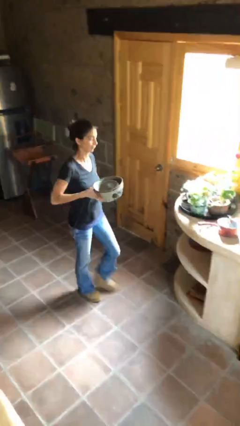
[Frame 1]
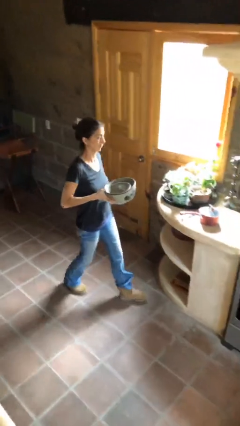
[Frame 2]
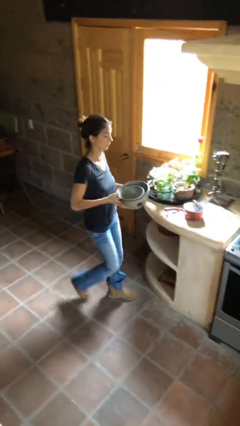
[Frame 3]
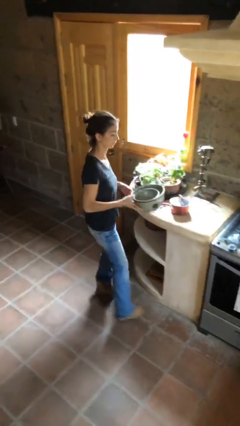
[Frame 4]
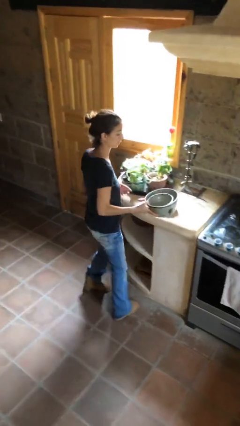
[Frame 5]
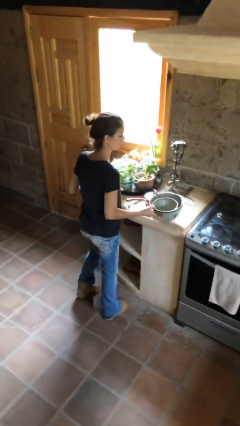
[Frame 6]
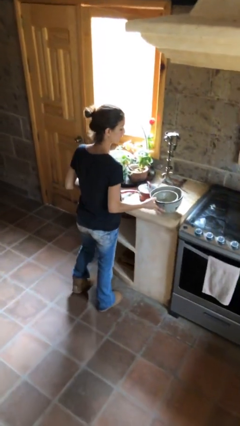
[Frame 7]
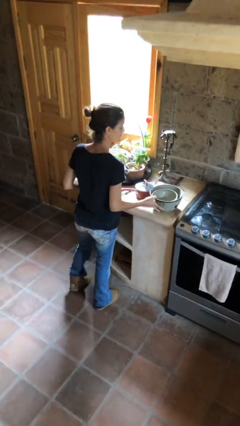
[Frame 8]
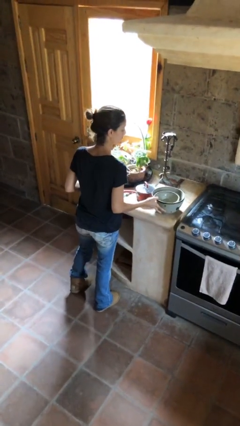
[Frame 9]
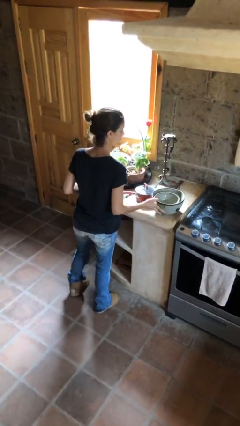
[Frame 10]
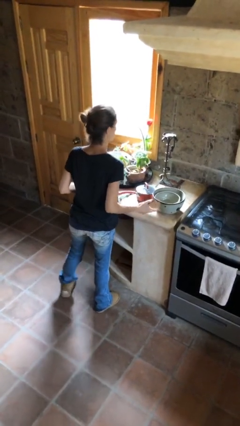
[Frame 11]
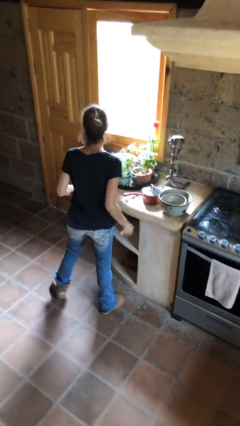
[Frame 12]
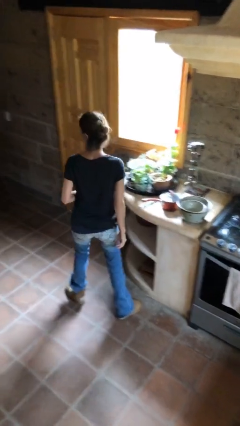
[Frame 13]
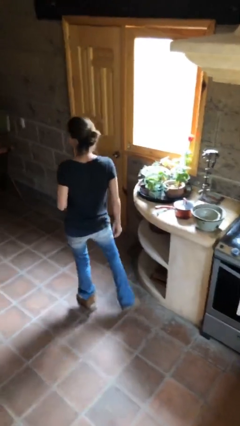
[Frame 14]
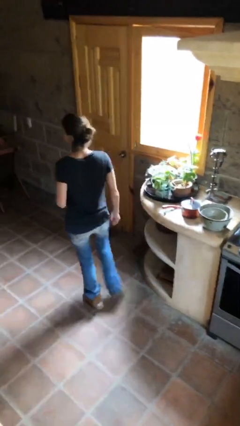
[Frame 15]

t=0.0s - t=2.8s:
person puts down object on table

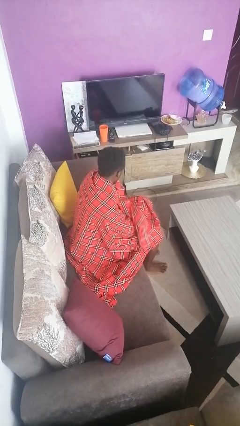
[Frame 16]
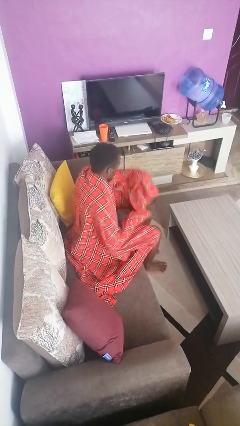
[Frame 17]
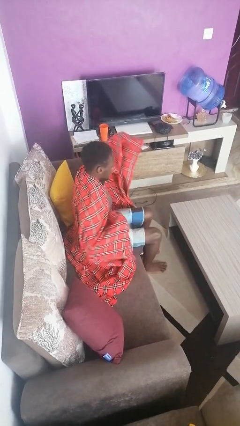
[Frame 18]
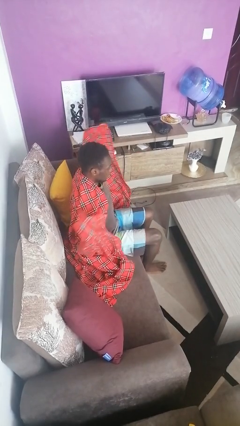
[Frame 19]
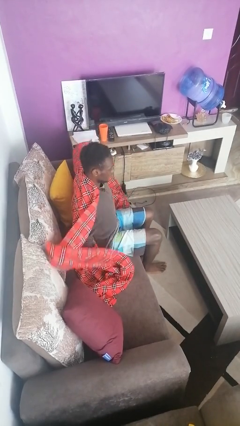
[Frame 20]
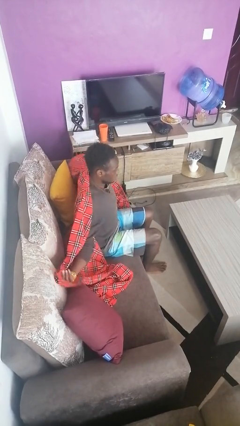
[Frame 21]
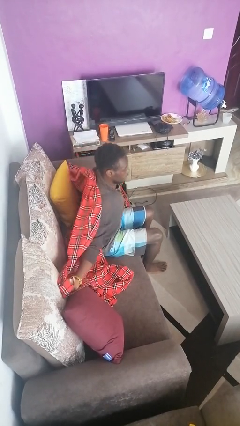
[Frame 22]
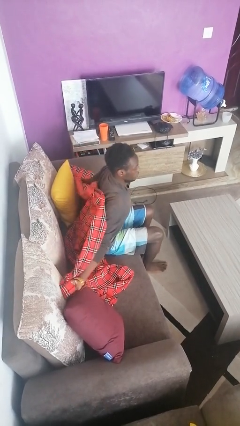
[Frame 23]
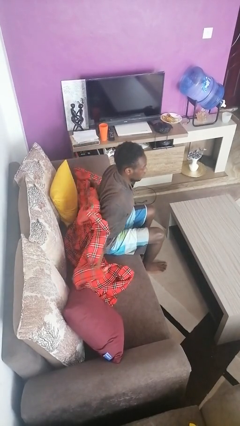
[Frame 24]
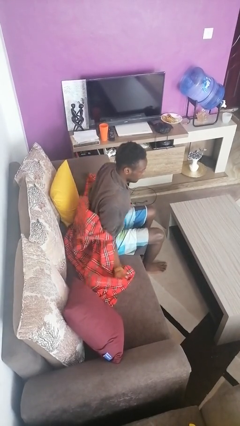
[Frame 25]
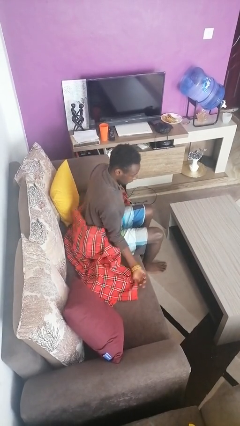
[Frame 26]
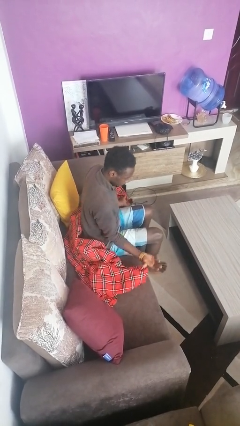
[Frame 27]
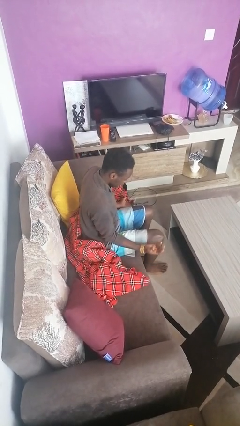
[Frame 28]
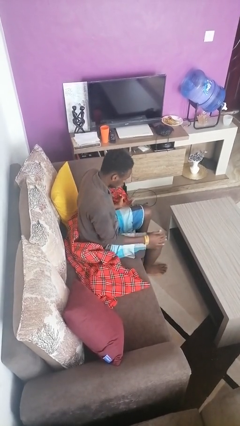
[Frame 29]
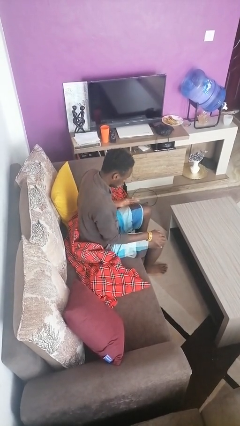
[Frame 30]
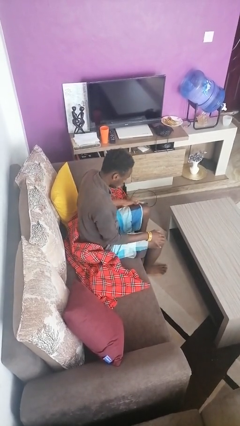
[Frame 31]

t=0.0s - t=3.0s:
person uncovers with blanket

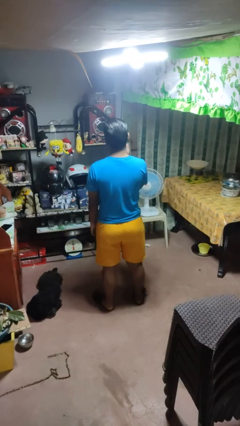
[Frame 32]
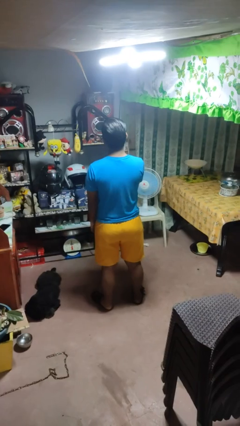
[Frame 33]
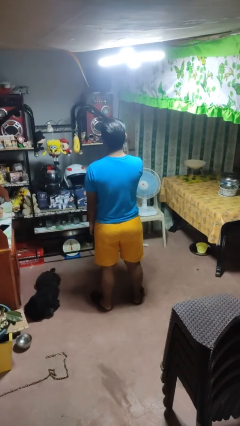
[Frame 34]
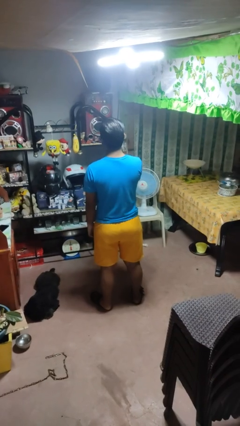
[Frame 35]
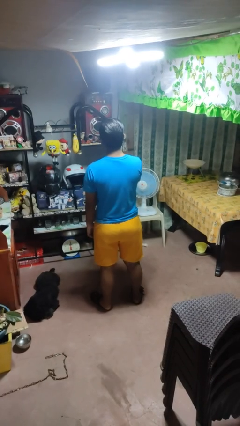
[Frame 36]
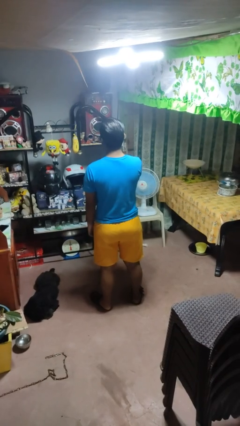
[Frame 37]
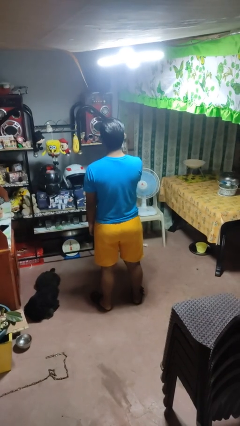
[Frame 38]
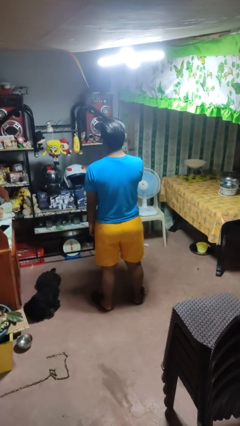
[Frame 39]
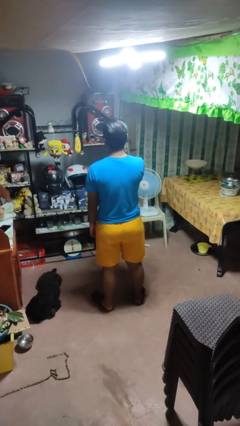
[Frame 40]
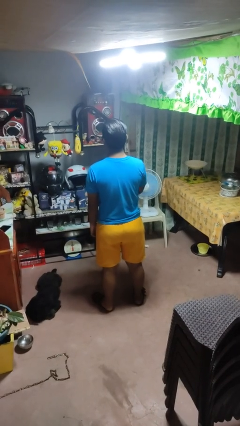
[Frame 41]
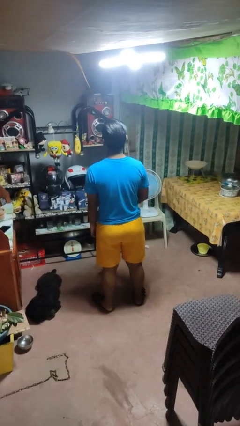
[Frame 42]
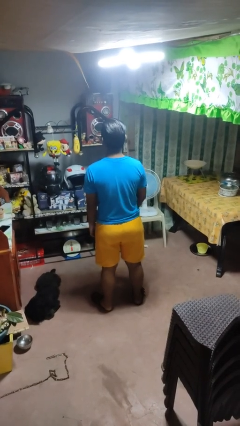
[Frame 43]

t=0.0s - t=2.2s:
person scratches face

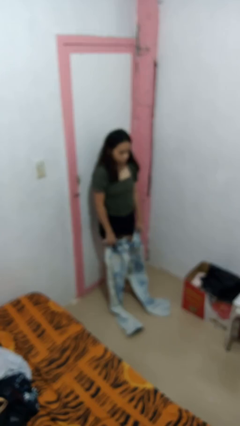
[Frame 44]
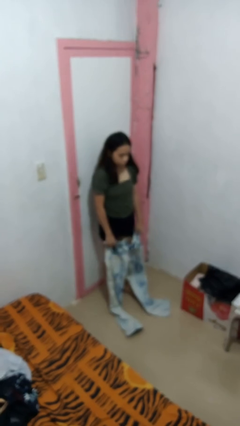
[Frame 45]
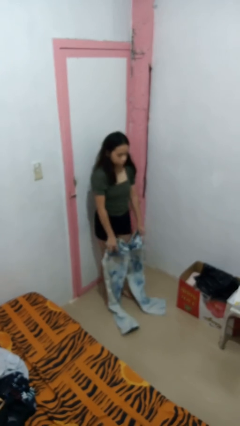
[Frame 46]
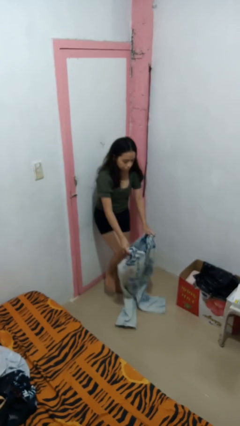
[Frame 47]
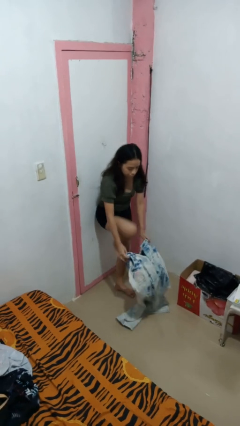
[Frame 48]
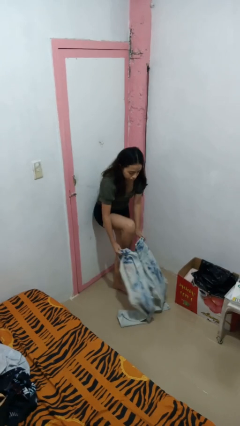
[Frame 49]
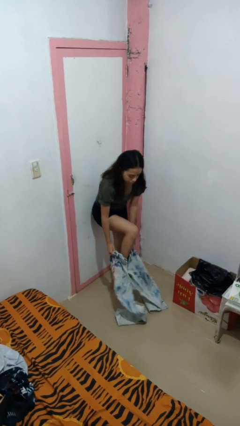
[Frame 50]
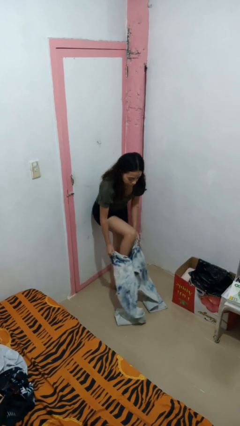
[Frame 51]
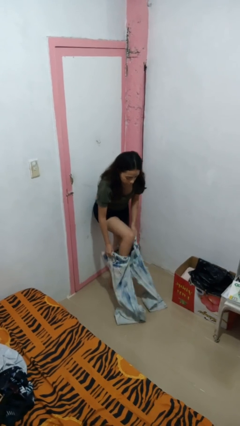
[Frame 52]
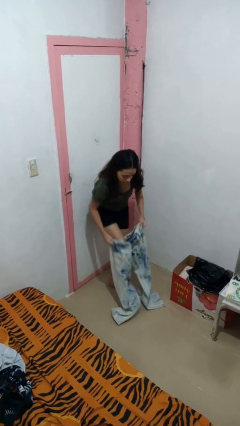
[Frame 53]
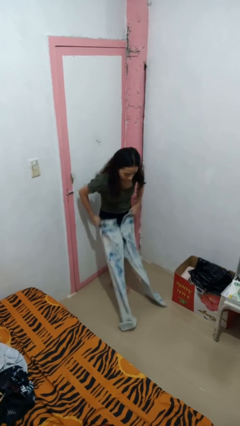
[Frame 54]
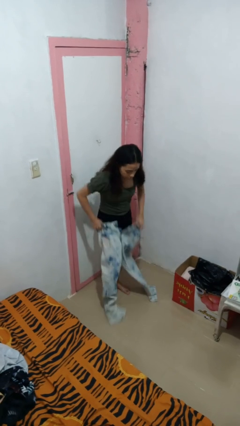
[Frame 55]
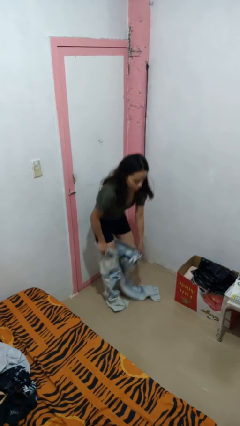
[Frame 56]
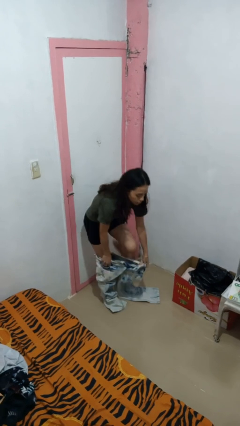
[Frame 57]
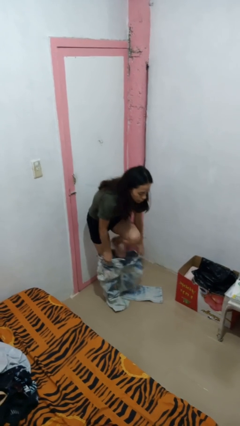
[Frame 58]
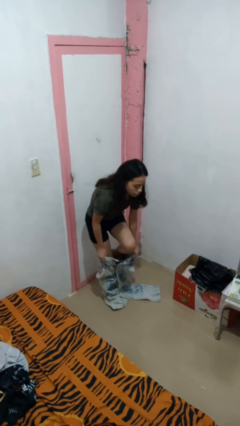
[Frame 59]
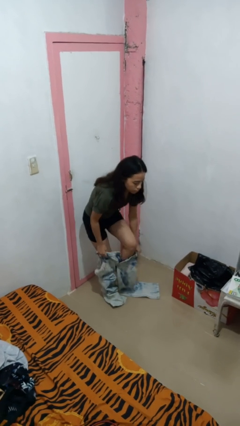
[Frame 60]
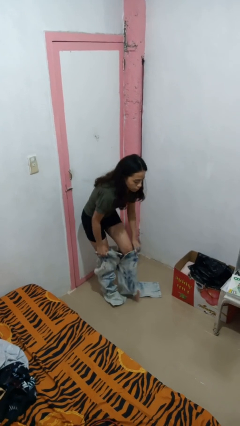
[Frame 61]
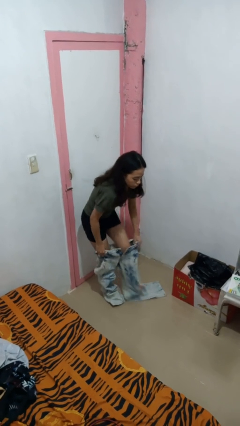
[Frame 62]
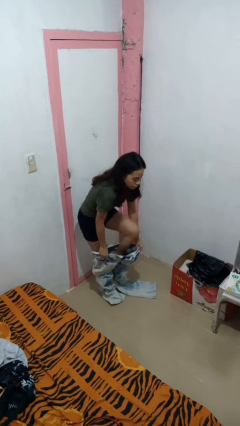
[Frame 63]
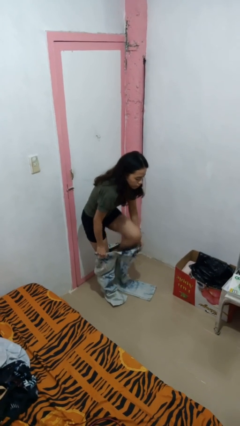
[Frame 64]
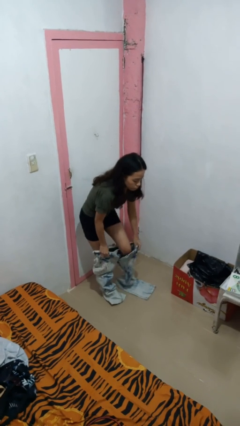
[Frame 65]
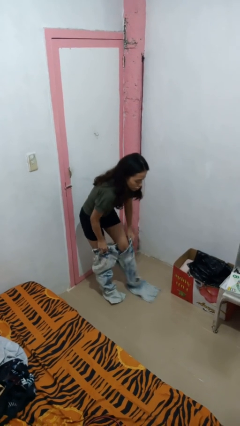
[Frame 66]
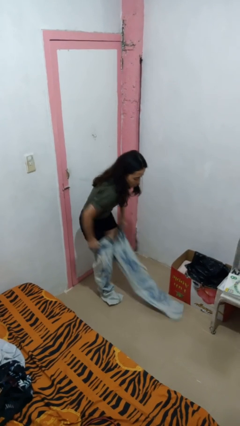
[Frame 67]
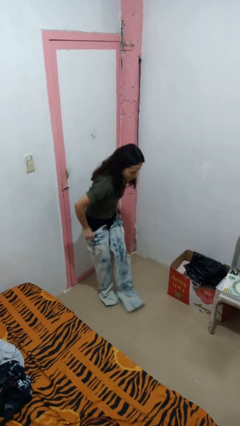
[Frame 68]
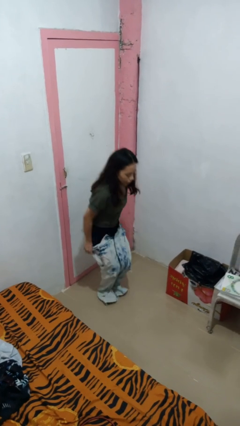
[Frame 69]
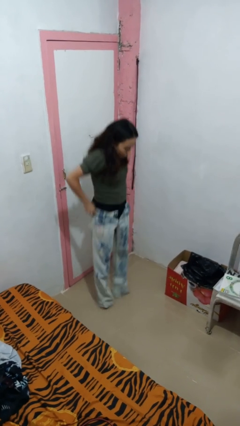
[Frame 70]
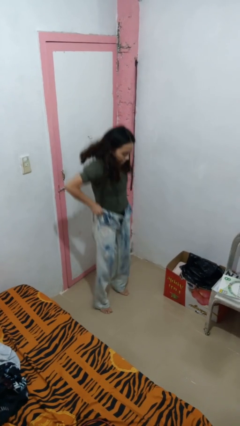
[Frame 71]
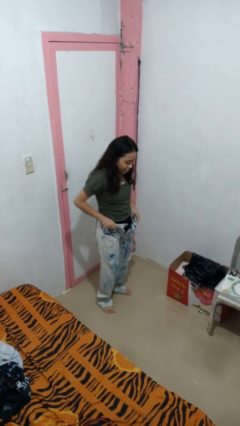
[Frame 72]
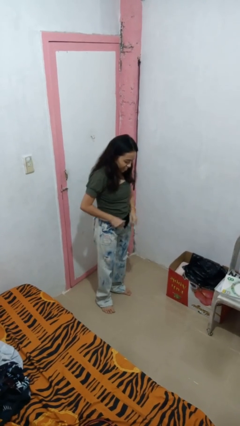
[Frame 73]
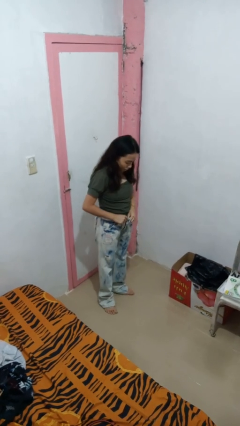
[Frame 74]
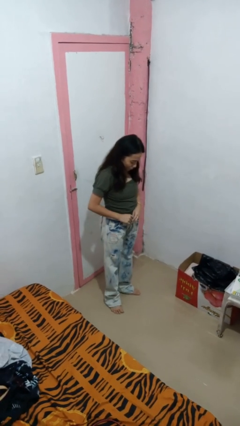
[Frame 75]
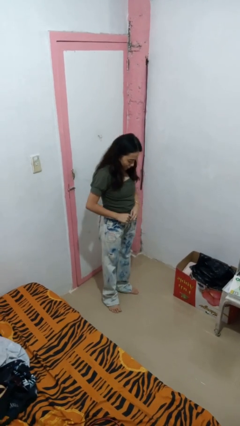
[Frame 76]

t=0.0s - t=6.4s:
person puts on pants

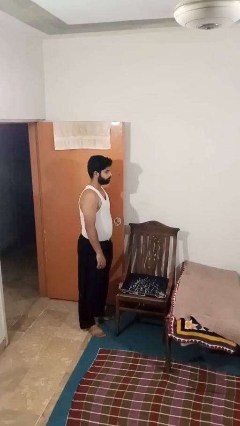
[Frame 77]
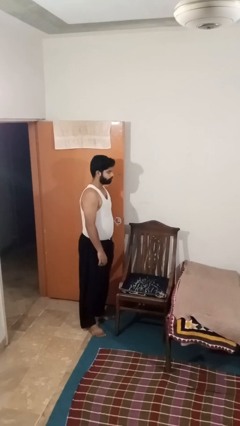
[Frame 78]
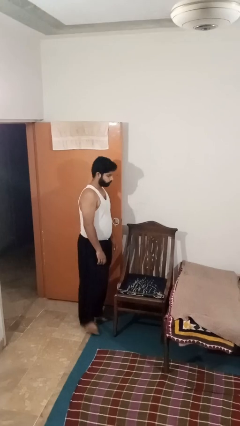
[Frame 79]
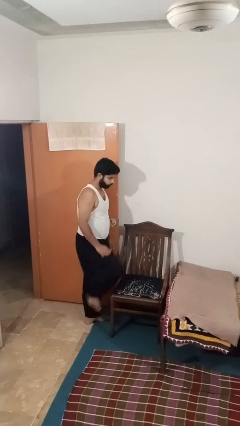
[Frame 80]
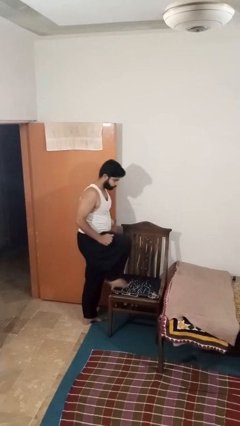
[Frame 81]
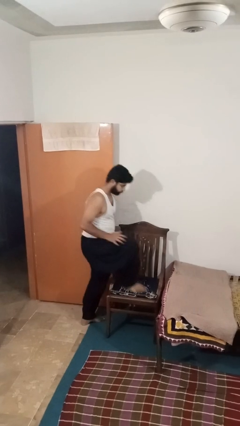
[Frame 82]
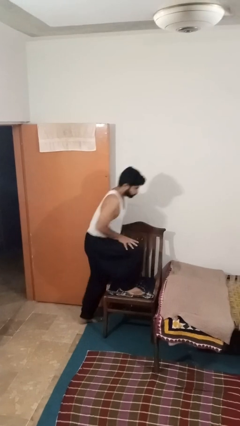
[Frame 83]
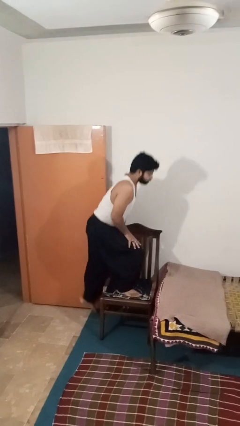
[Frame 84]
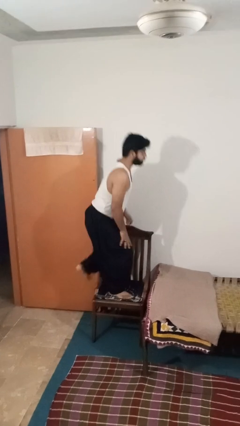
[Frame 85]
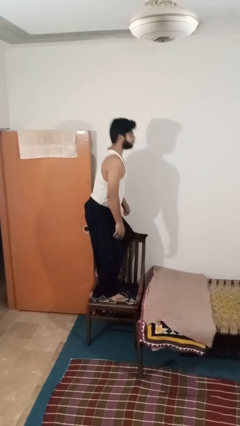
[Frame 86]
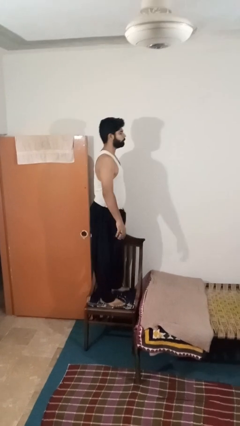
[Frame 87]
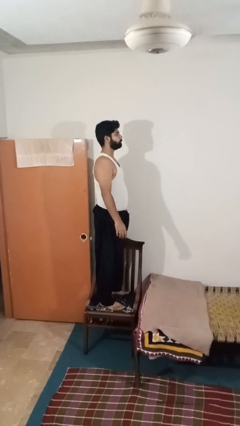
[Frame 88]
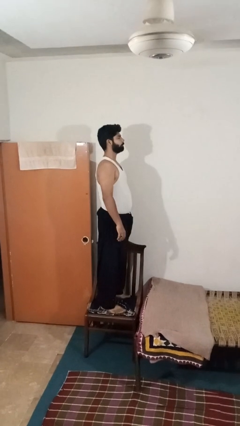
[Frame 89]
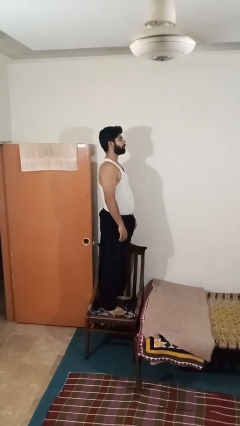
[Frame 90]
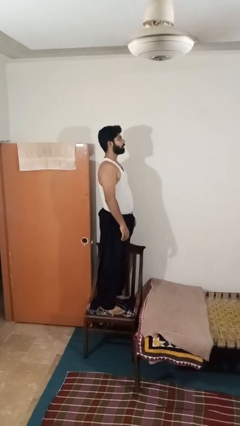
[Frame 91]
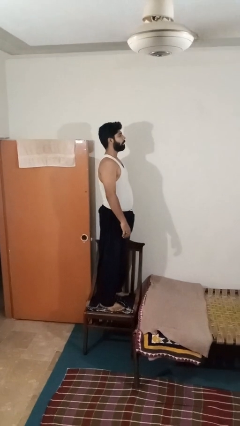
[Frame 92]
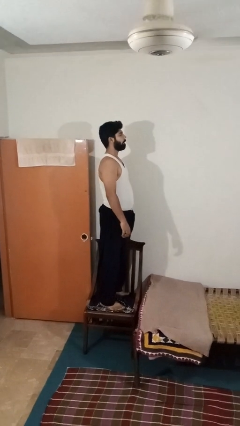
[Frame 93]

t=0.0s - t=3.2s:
person climbs on chair

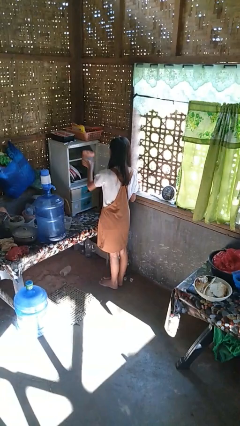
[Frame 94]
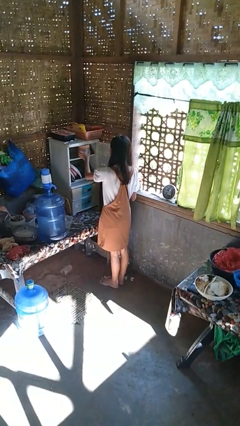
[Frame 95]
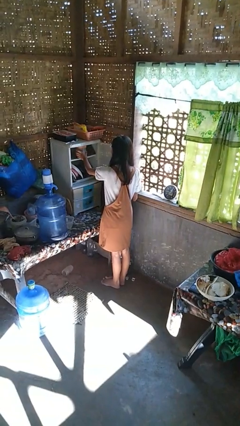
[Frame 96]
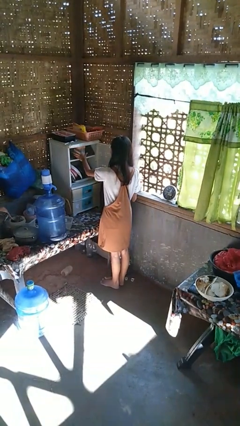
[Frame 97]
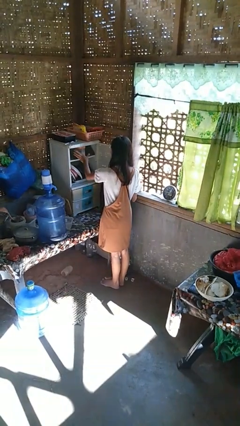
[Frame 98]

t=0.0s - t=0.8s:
person puts down object into cabinet
